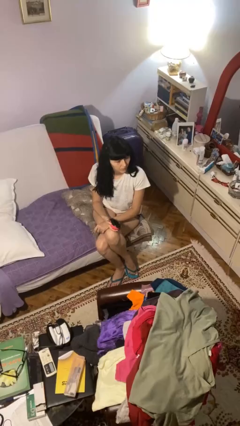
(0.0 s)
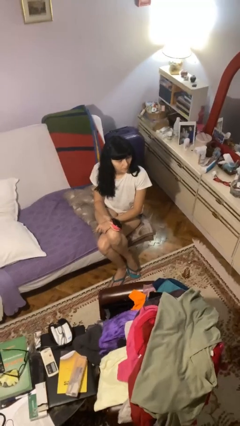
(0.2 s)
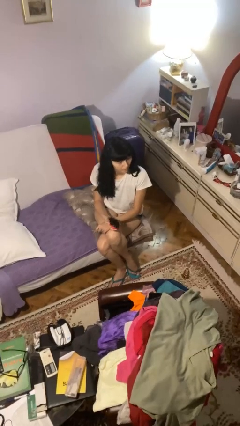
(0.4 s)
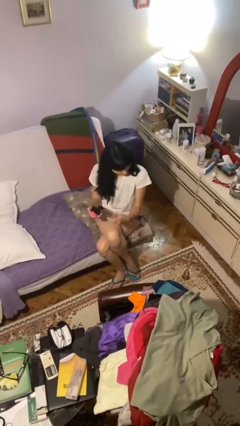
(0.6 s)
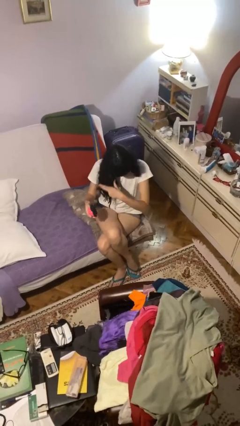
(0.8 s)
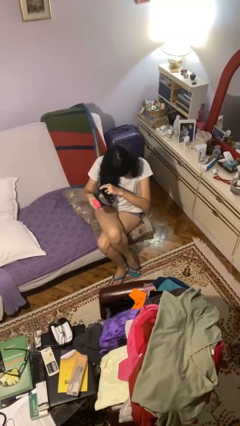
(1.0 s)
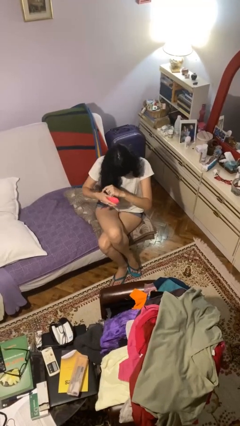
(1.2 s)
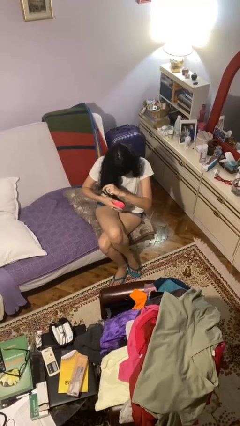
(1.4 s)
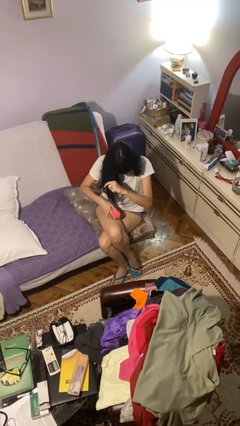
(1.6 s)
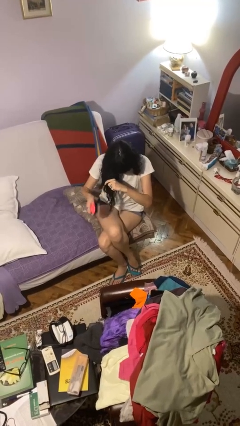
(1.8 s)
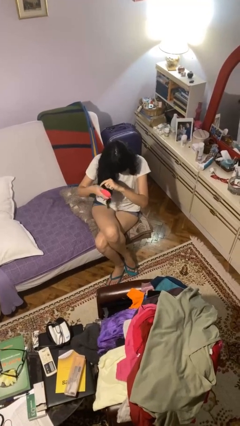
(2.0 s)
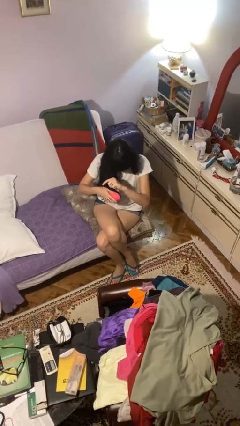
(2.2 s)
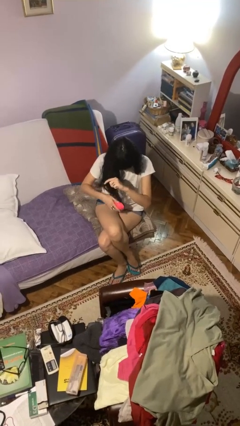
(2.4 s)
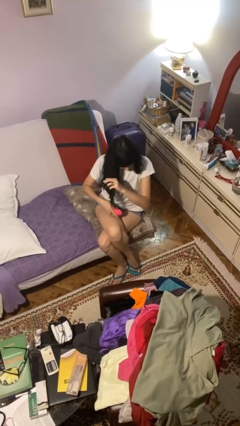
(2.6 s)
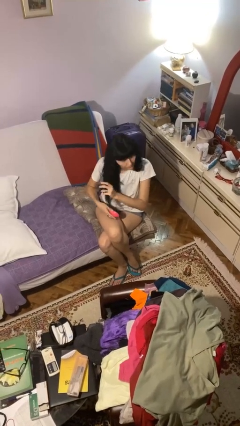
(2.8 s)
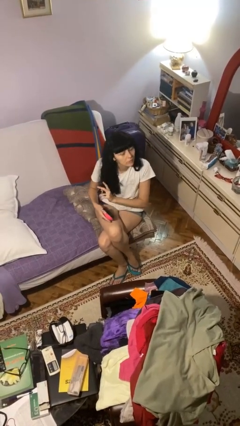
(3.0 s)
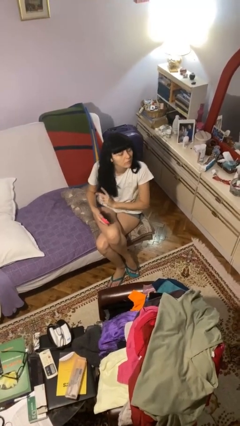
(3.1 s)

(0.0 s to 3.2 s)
person brushes hair

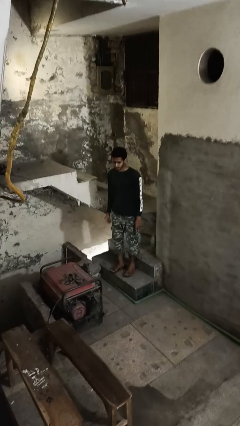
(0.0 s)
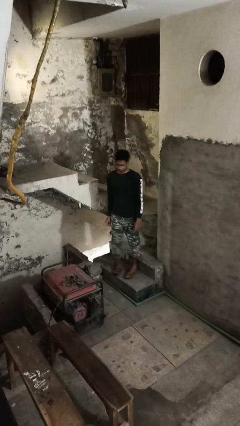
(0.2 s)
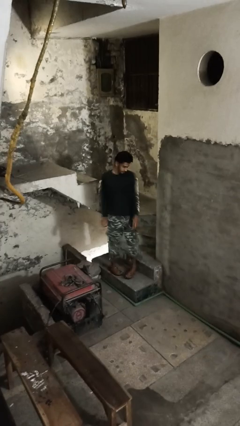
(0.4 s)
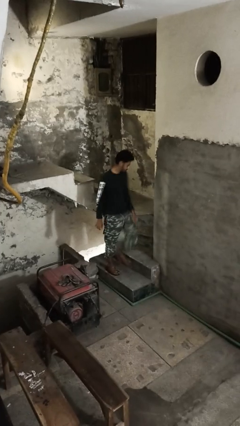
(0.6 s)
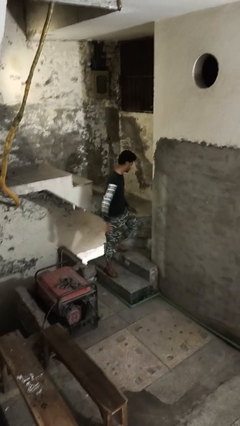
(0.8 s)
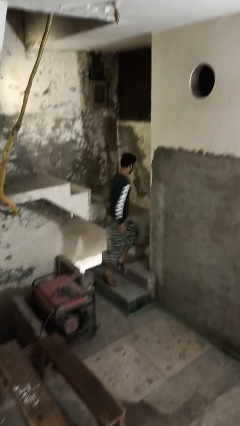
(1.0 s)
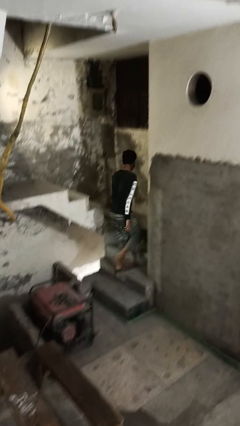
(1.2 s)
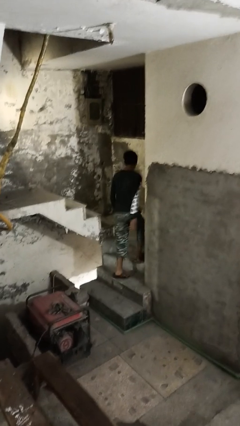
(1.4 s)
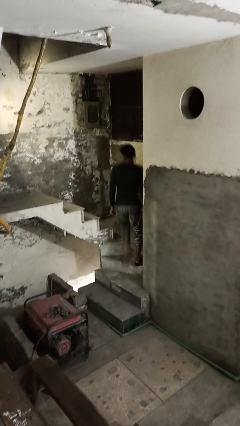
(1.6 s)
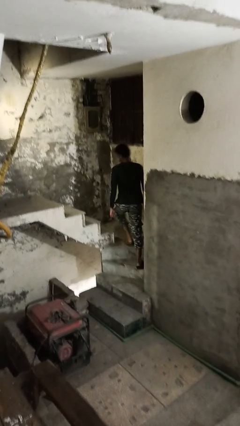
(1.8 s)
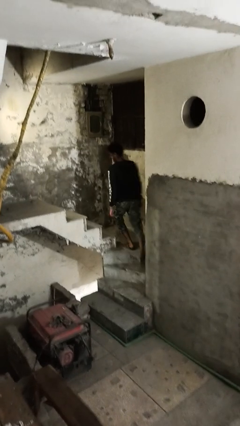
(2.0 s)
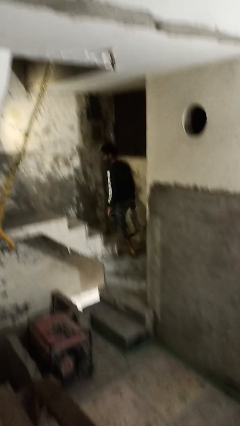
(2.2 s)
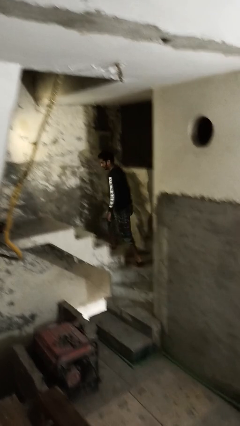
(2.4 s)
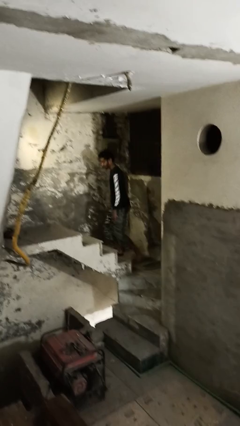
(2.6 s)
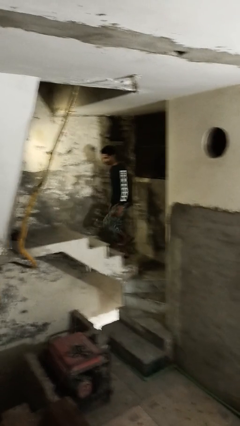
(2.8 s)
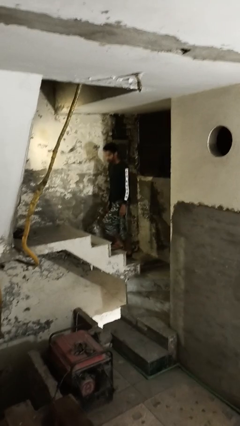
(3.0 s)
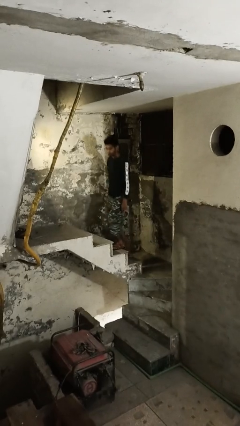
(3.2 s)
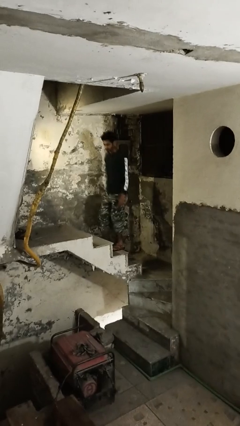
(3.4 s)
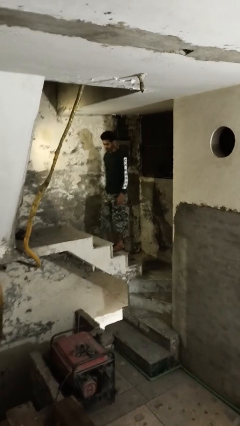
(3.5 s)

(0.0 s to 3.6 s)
person climbs up stairs

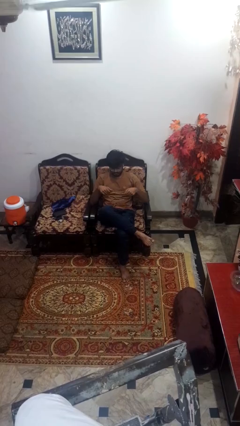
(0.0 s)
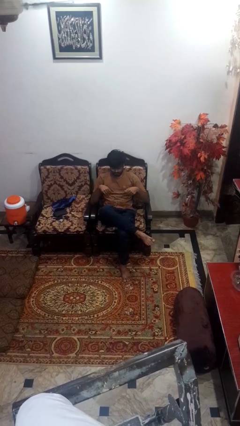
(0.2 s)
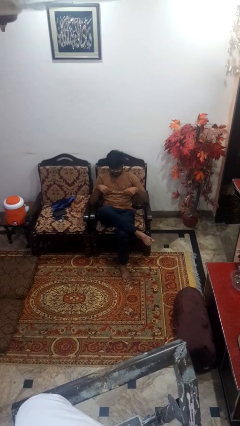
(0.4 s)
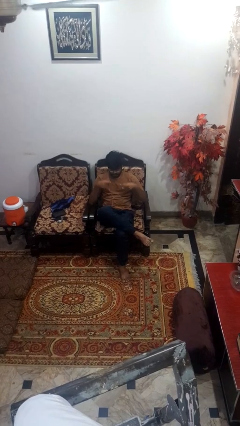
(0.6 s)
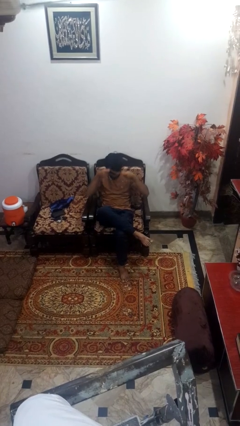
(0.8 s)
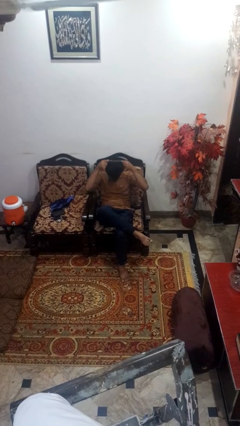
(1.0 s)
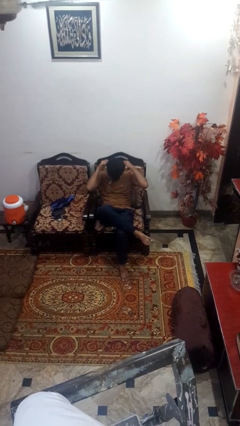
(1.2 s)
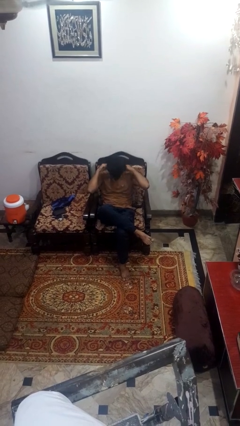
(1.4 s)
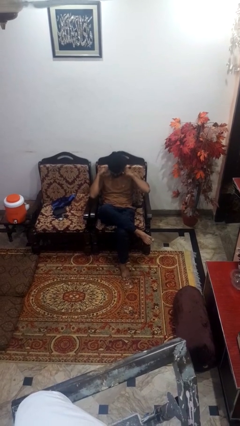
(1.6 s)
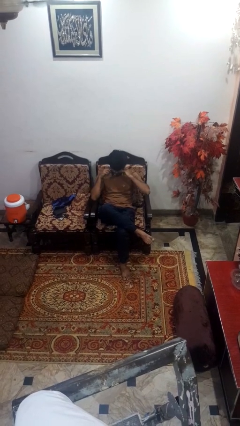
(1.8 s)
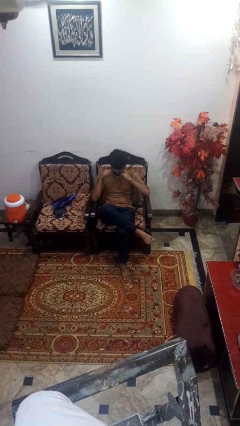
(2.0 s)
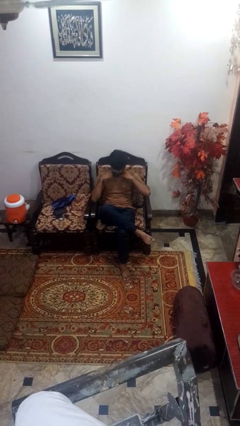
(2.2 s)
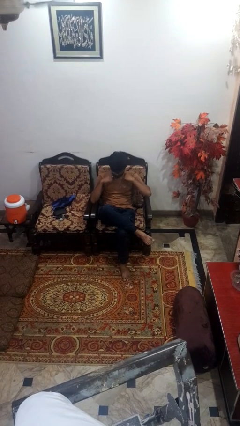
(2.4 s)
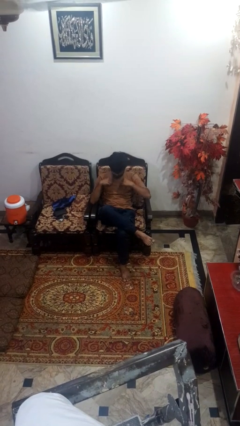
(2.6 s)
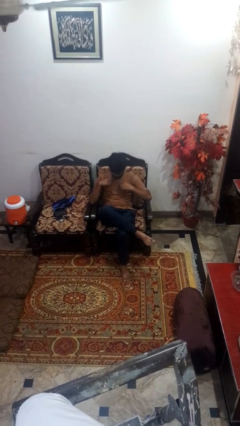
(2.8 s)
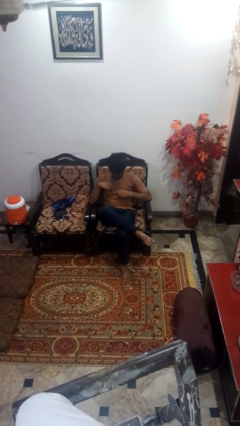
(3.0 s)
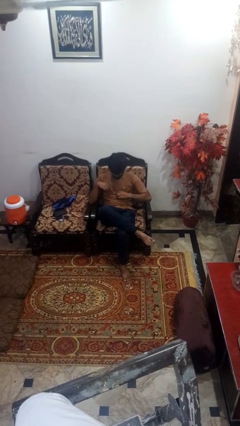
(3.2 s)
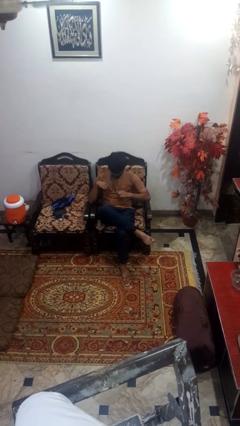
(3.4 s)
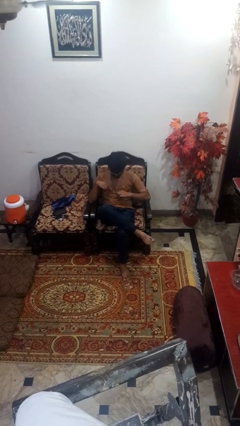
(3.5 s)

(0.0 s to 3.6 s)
person puts on necklace

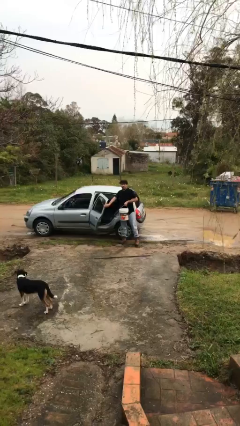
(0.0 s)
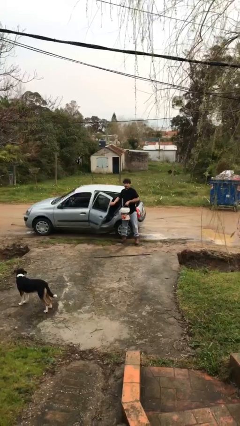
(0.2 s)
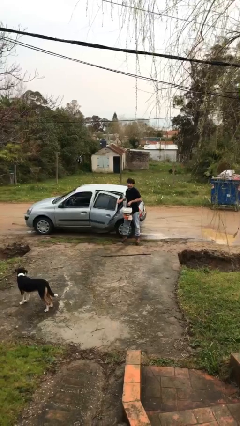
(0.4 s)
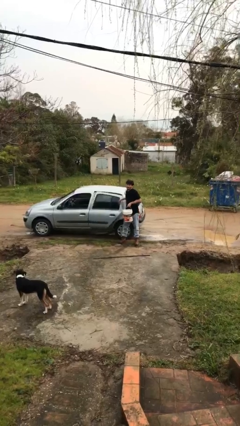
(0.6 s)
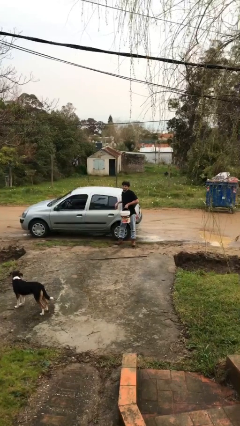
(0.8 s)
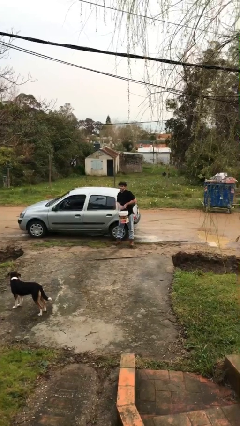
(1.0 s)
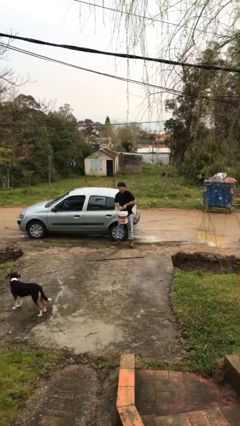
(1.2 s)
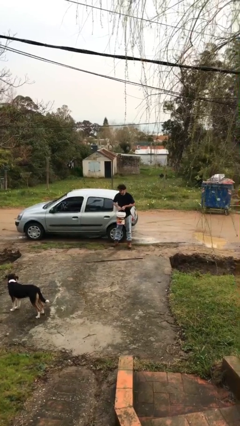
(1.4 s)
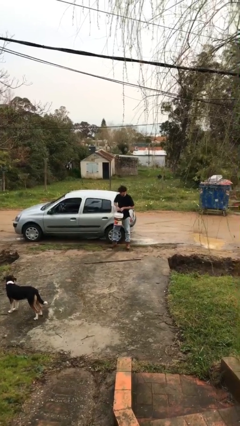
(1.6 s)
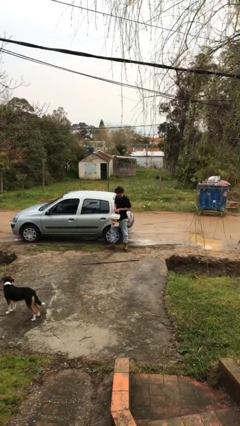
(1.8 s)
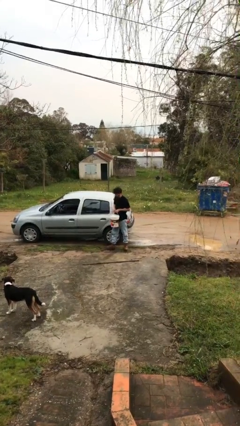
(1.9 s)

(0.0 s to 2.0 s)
person closes car door

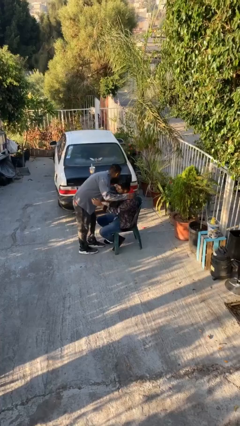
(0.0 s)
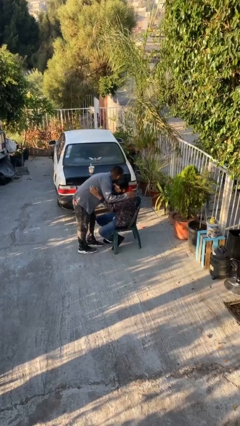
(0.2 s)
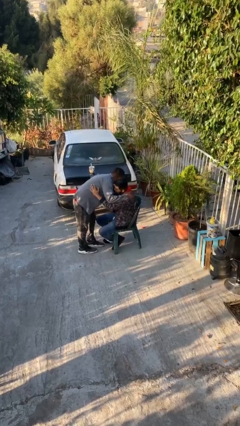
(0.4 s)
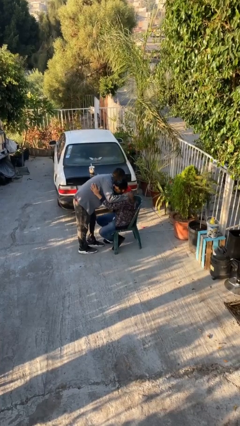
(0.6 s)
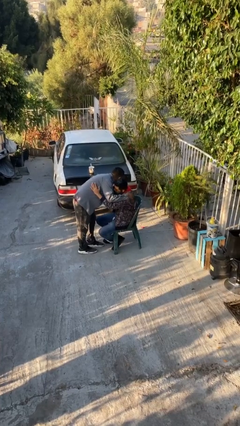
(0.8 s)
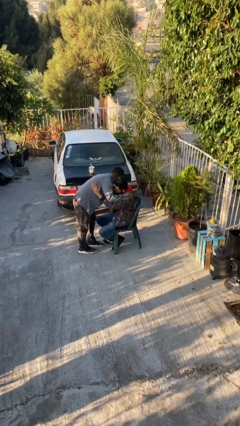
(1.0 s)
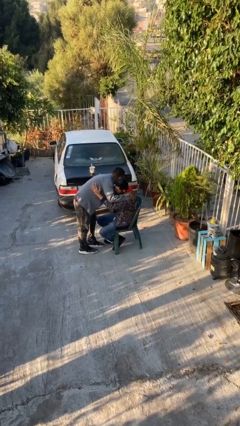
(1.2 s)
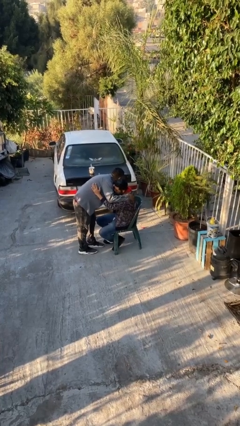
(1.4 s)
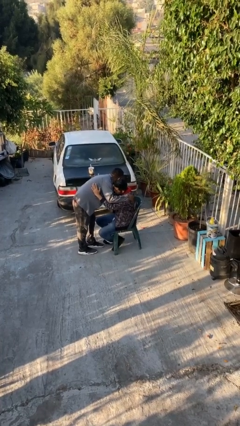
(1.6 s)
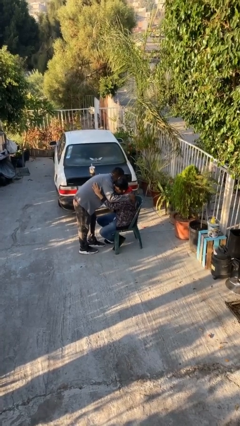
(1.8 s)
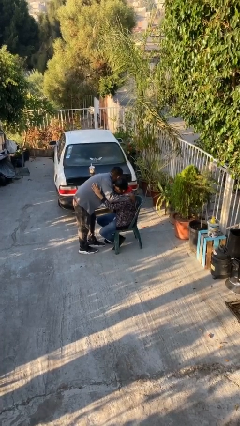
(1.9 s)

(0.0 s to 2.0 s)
person embraces person

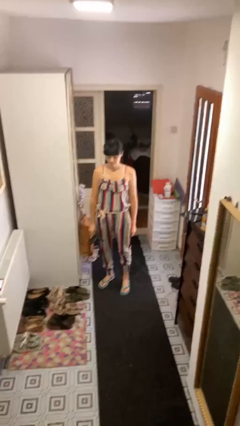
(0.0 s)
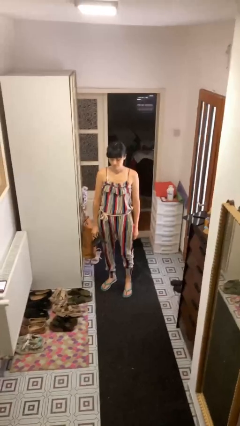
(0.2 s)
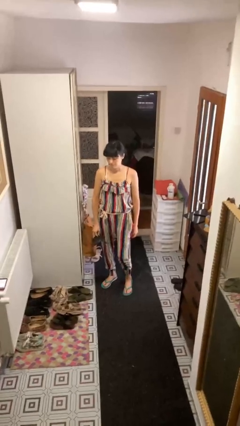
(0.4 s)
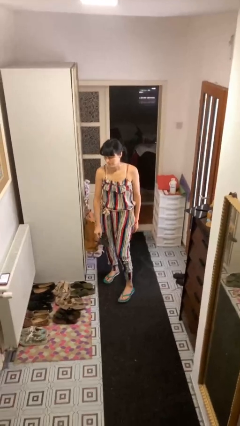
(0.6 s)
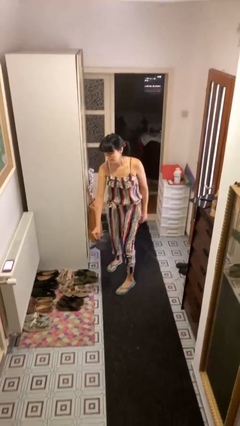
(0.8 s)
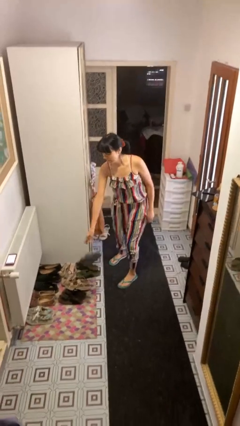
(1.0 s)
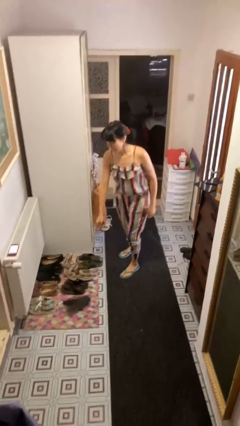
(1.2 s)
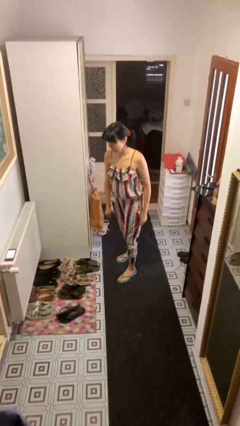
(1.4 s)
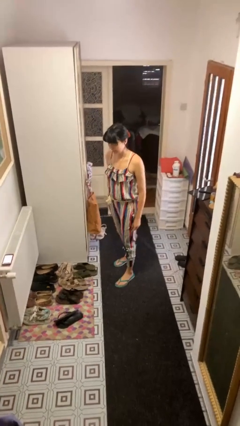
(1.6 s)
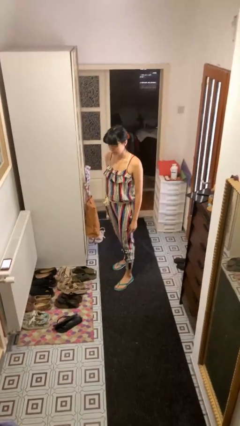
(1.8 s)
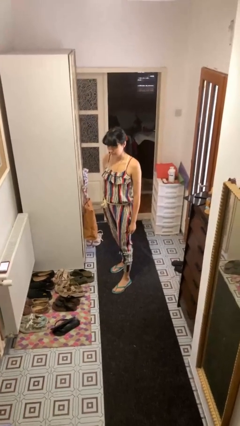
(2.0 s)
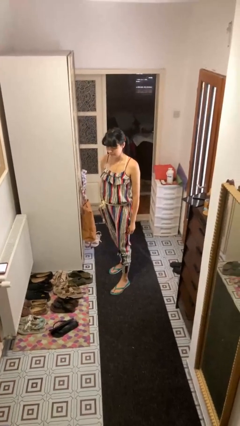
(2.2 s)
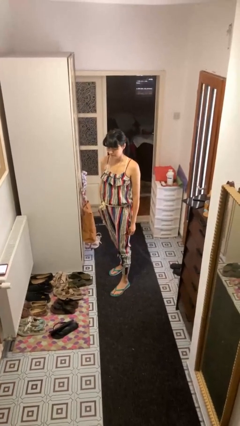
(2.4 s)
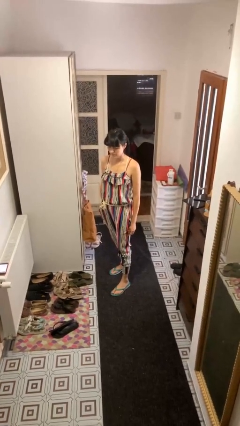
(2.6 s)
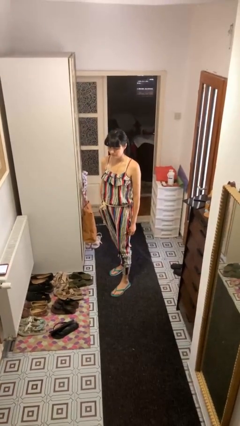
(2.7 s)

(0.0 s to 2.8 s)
person throws object to ground
